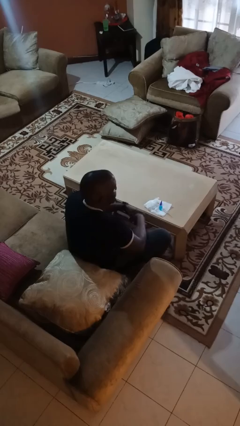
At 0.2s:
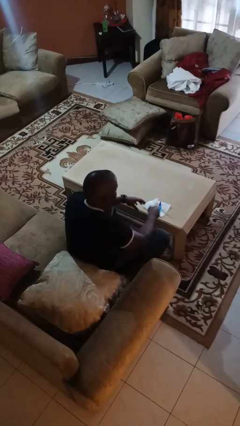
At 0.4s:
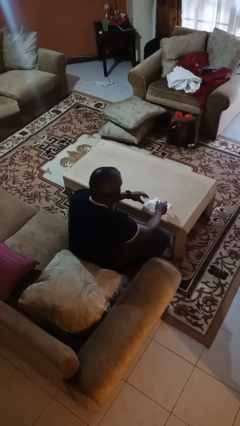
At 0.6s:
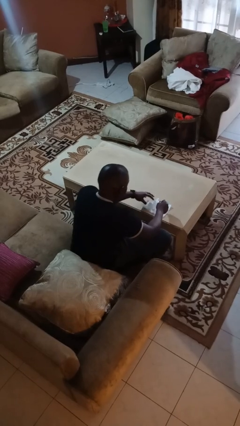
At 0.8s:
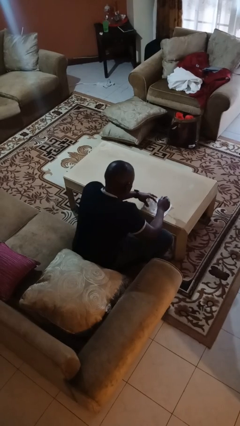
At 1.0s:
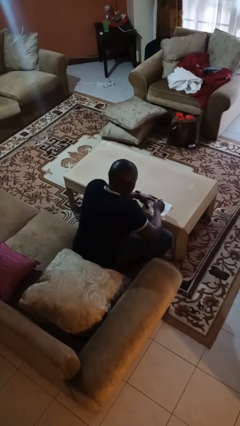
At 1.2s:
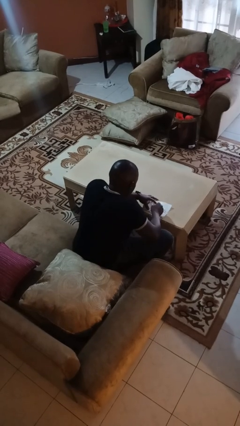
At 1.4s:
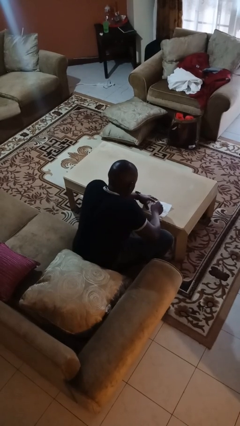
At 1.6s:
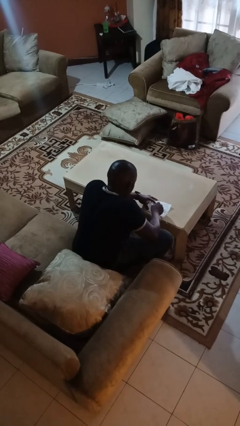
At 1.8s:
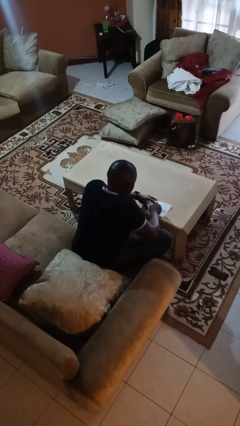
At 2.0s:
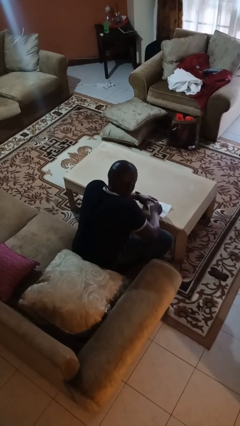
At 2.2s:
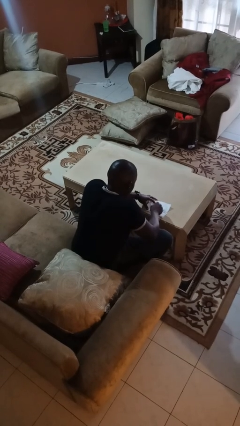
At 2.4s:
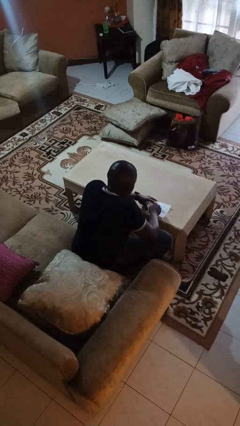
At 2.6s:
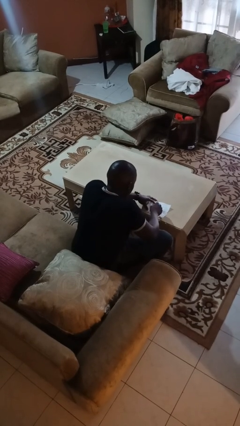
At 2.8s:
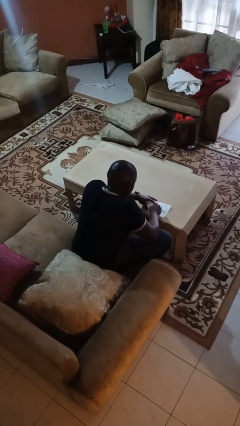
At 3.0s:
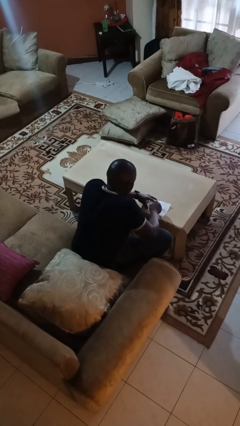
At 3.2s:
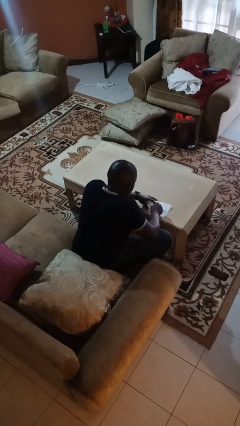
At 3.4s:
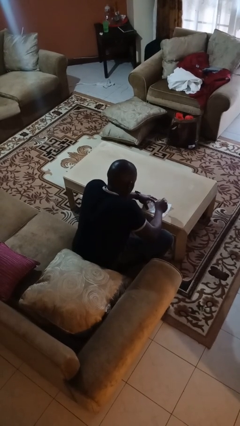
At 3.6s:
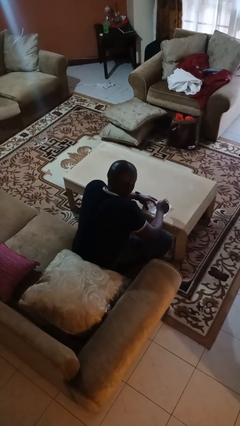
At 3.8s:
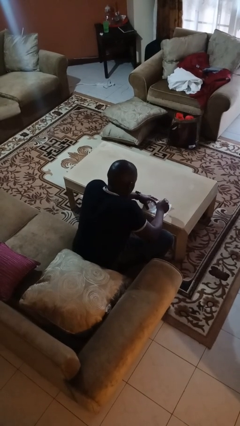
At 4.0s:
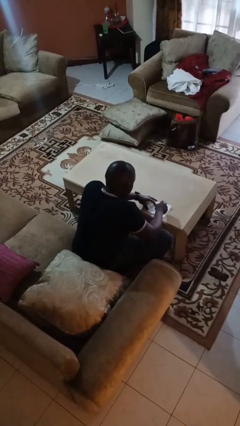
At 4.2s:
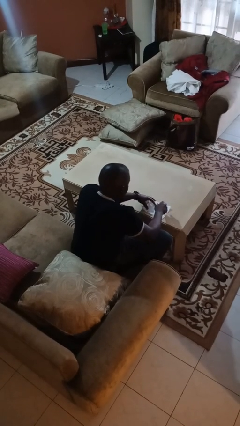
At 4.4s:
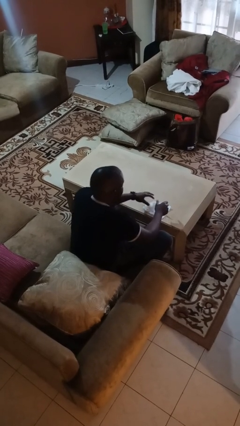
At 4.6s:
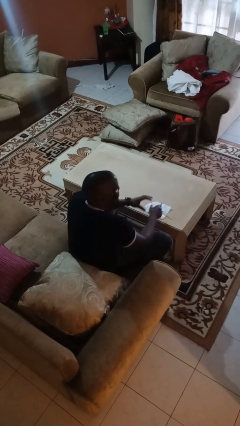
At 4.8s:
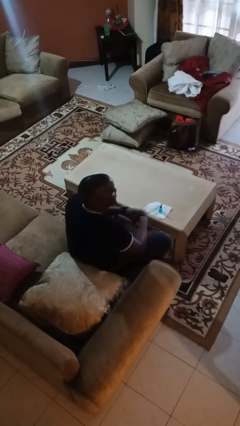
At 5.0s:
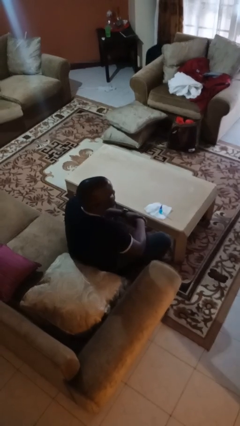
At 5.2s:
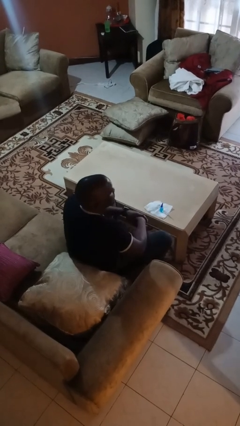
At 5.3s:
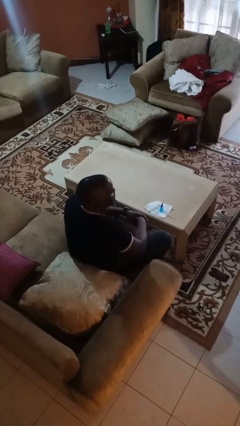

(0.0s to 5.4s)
person paints fingernails

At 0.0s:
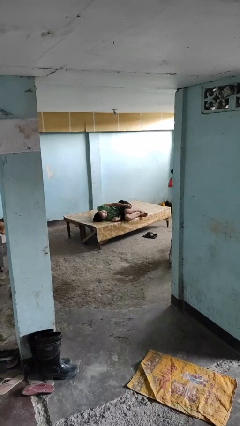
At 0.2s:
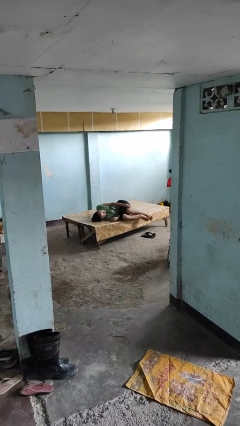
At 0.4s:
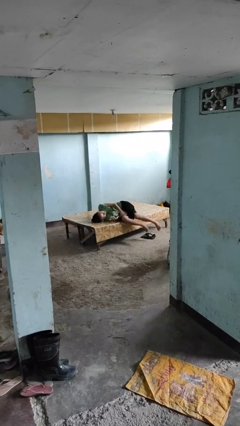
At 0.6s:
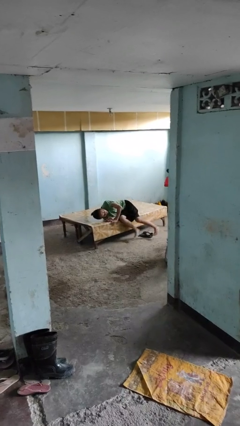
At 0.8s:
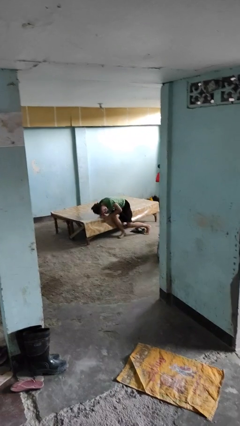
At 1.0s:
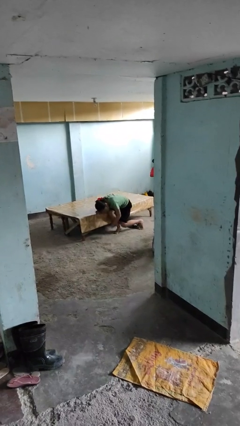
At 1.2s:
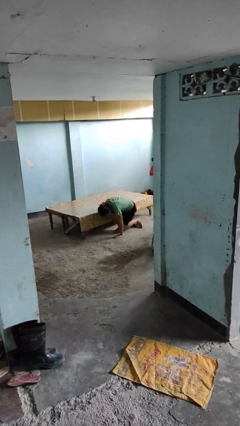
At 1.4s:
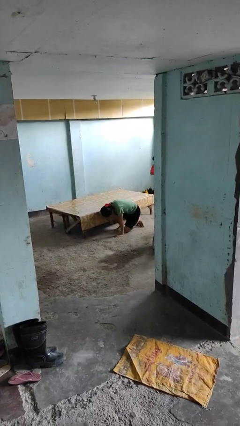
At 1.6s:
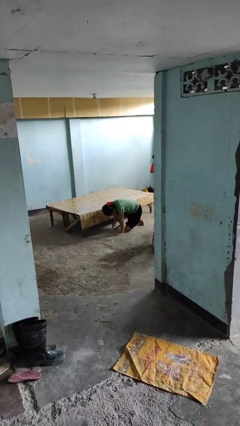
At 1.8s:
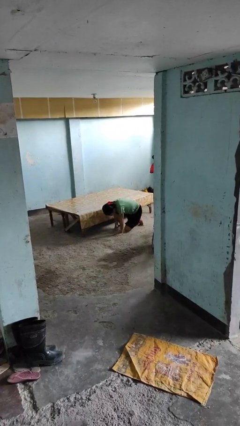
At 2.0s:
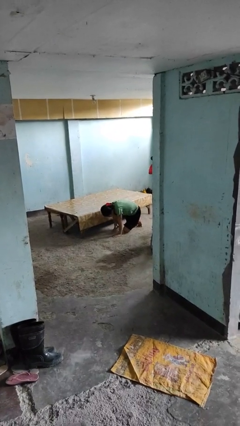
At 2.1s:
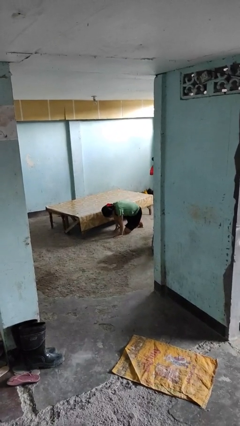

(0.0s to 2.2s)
person falls from bed

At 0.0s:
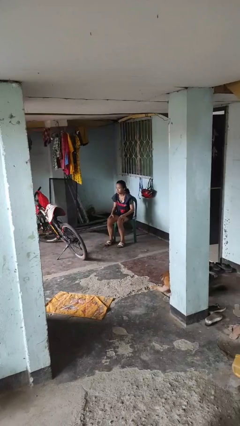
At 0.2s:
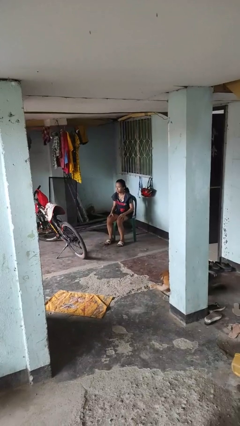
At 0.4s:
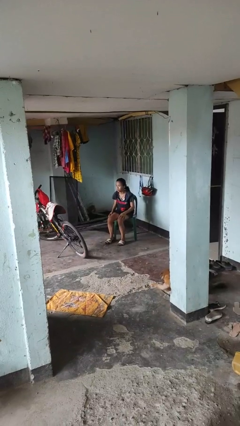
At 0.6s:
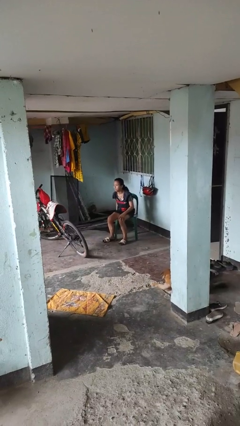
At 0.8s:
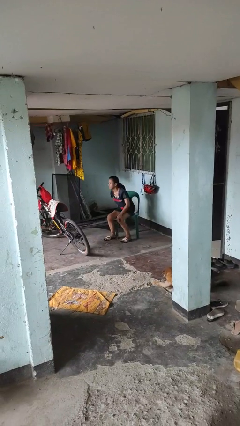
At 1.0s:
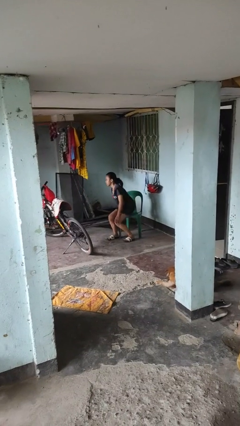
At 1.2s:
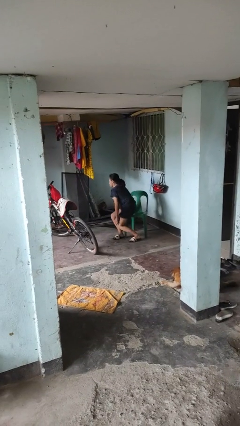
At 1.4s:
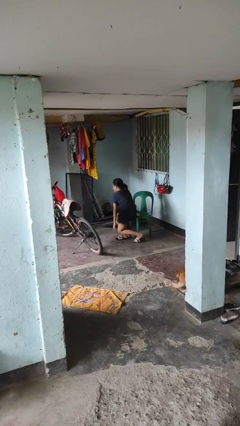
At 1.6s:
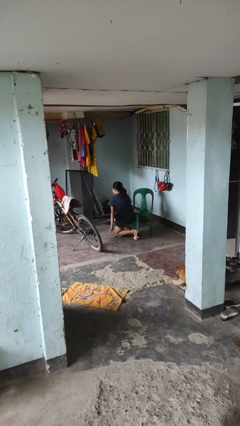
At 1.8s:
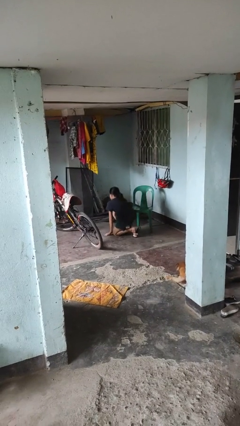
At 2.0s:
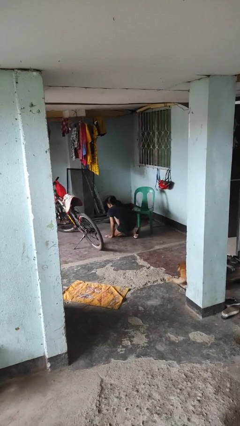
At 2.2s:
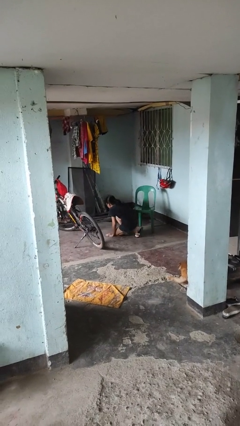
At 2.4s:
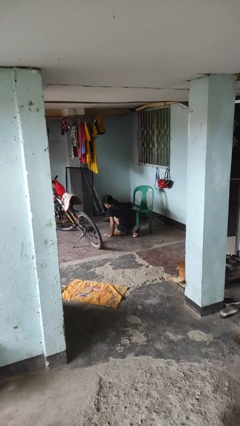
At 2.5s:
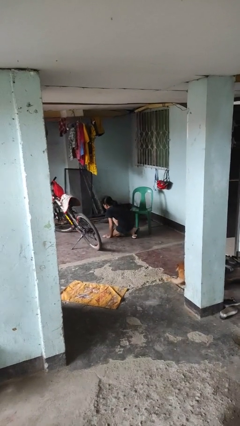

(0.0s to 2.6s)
person falls from chair

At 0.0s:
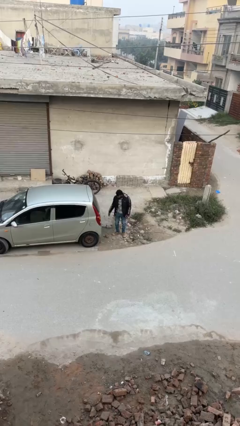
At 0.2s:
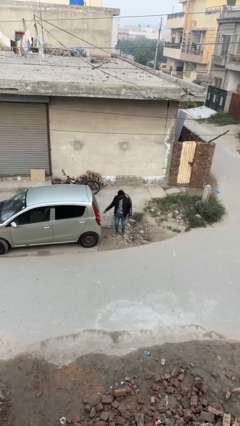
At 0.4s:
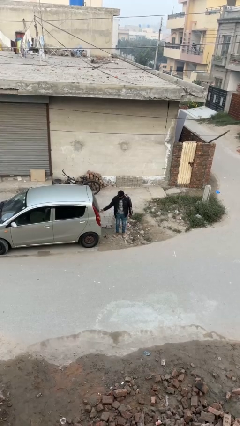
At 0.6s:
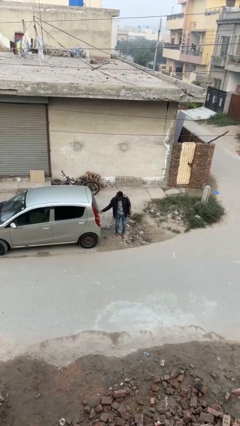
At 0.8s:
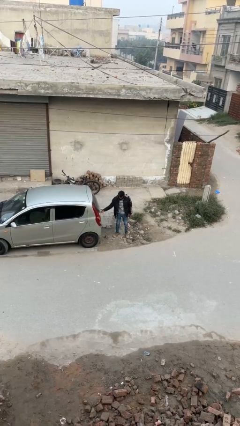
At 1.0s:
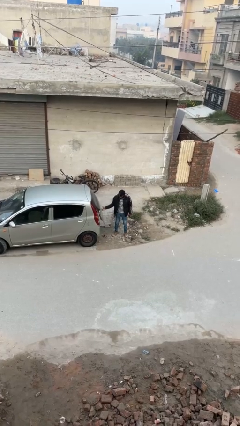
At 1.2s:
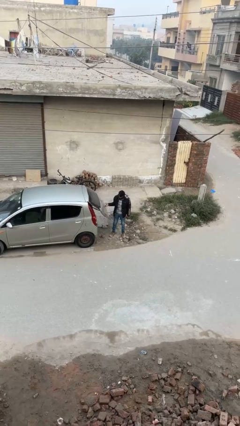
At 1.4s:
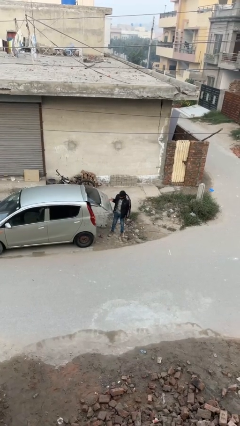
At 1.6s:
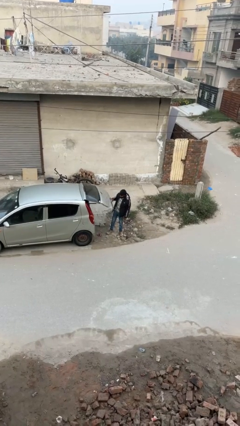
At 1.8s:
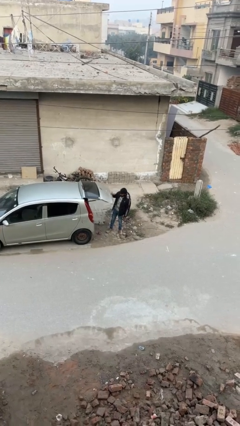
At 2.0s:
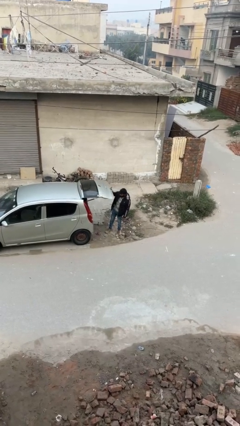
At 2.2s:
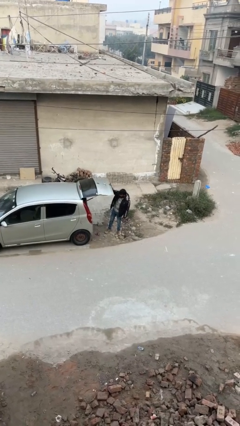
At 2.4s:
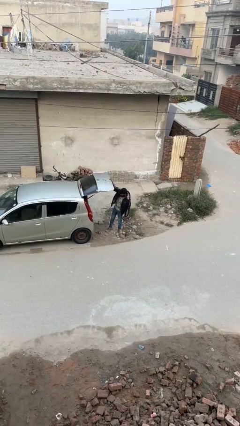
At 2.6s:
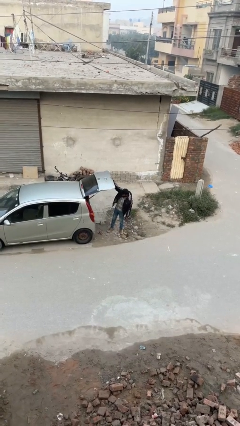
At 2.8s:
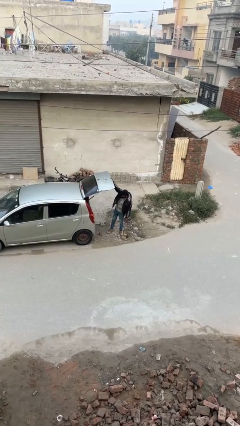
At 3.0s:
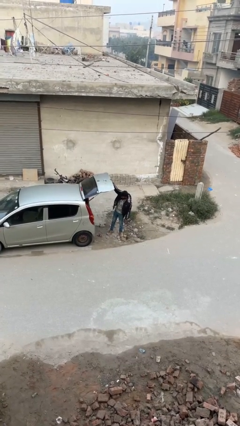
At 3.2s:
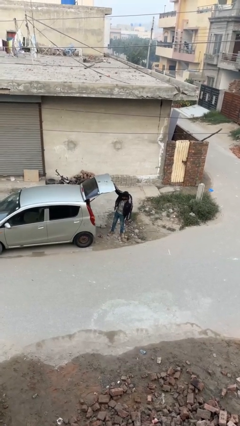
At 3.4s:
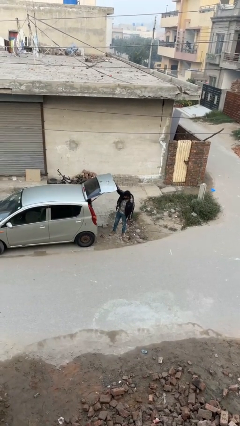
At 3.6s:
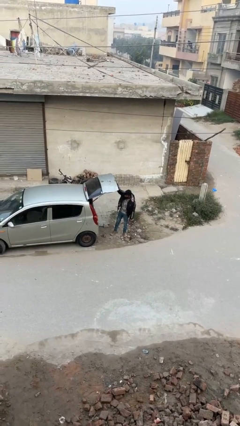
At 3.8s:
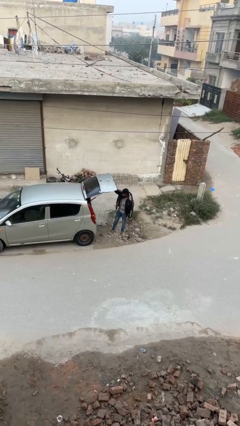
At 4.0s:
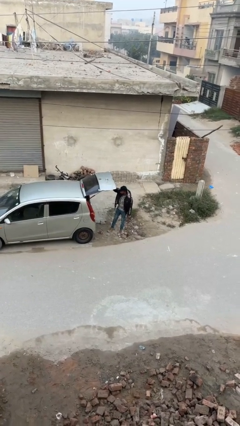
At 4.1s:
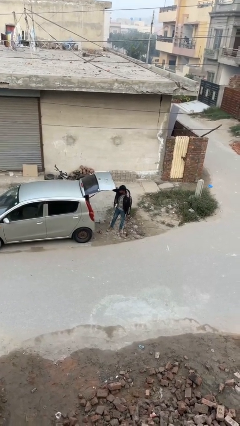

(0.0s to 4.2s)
person opens car trunk

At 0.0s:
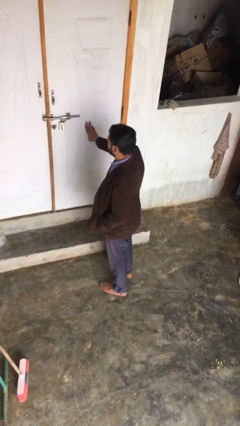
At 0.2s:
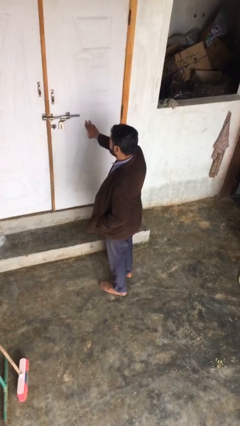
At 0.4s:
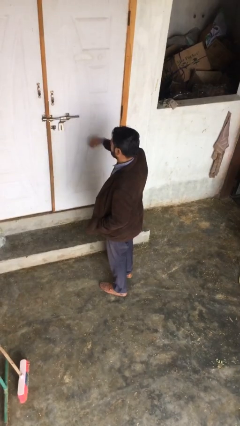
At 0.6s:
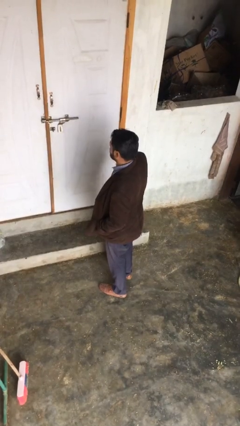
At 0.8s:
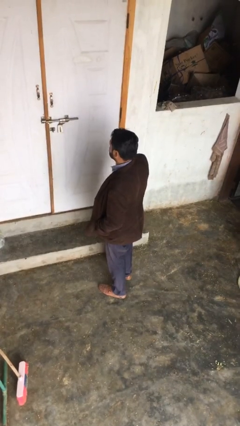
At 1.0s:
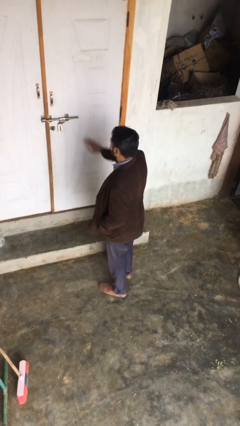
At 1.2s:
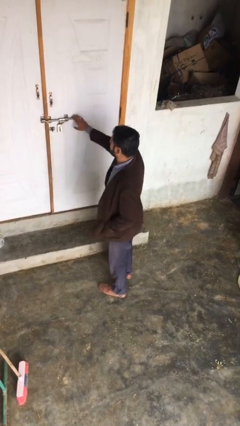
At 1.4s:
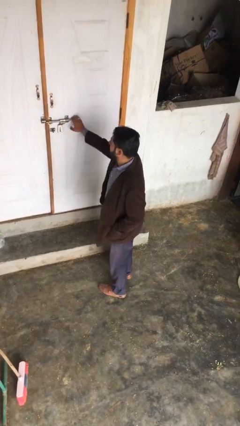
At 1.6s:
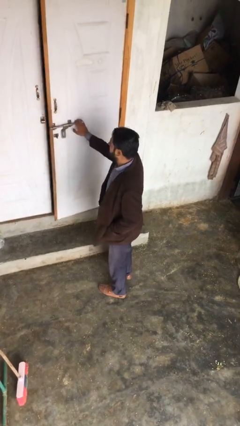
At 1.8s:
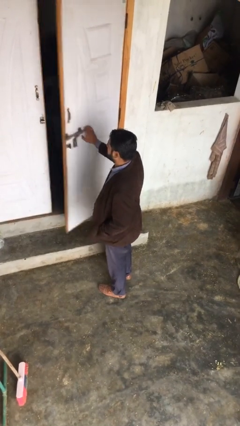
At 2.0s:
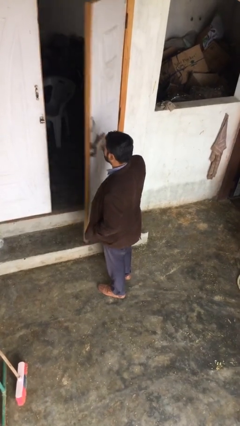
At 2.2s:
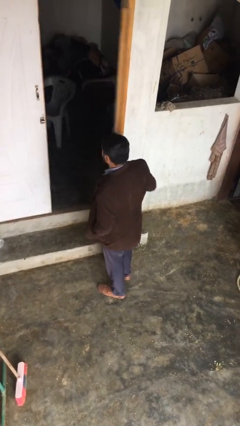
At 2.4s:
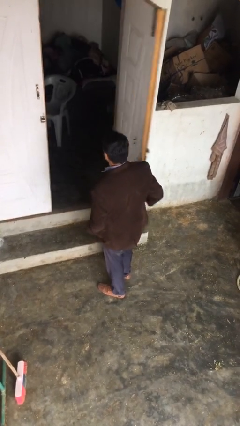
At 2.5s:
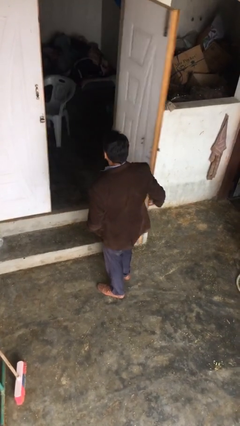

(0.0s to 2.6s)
person opens facility door

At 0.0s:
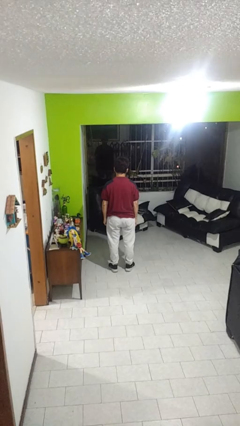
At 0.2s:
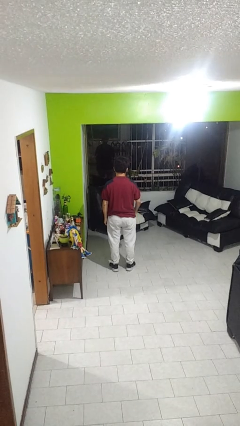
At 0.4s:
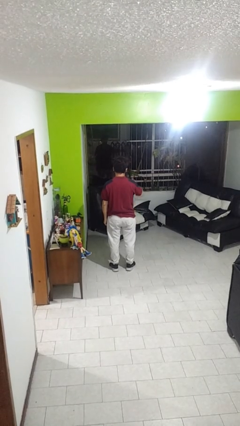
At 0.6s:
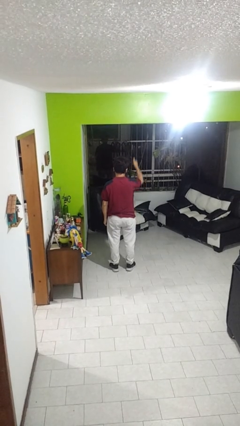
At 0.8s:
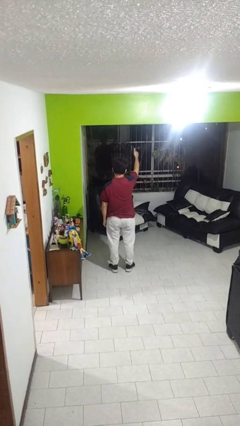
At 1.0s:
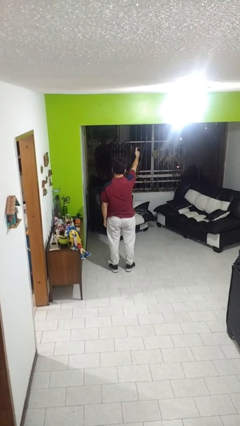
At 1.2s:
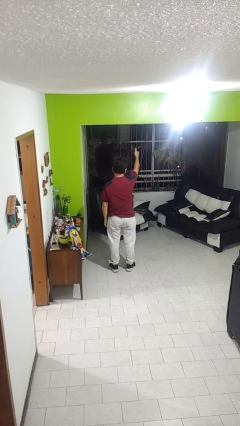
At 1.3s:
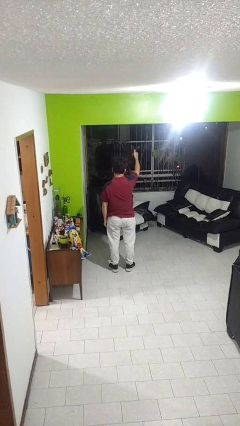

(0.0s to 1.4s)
person gestures thumbs up
